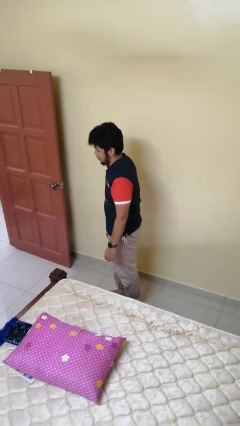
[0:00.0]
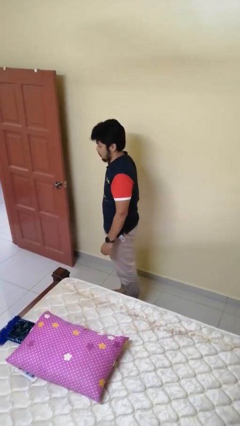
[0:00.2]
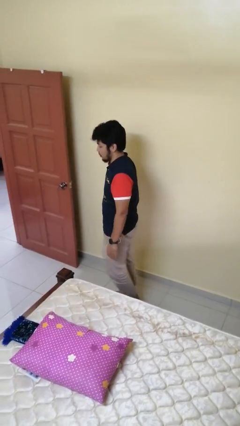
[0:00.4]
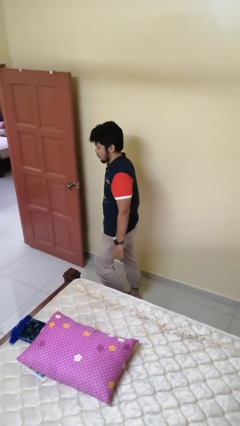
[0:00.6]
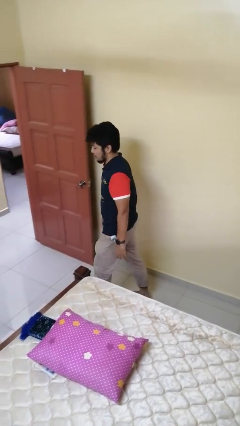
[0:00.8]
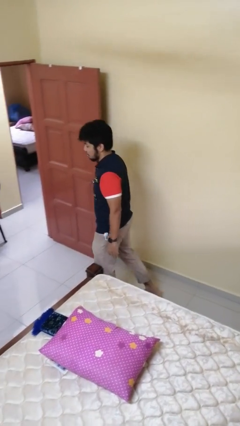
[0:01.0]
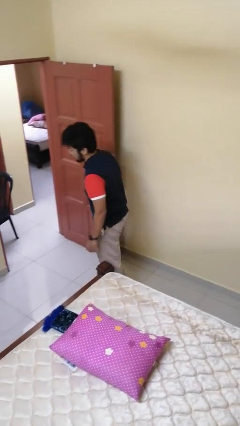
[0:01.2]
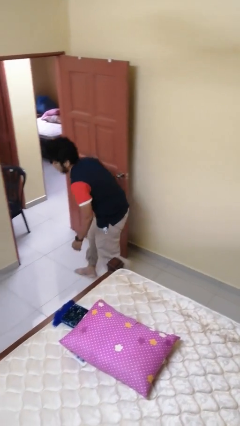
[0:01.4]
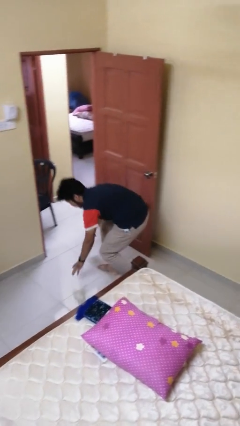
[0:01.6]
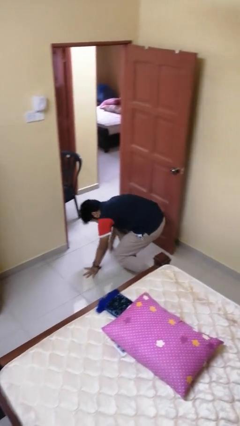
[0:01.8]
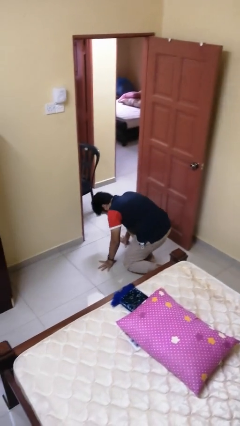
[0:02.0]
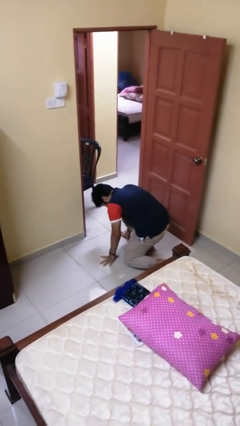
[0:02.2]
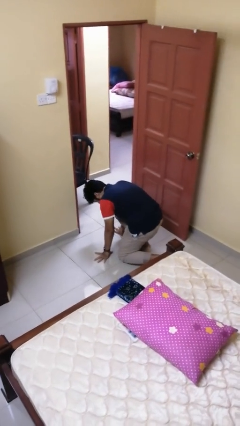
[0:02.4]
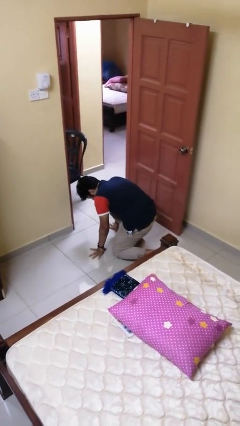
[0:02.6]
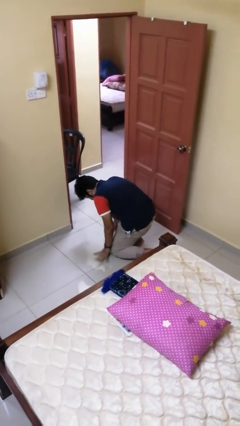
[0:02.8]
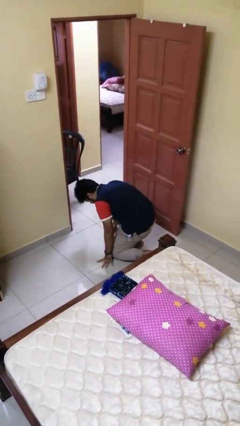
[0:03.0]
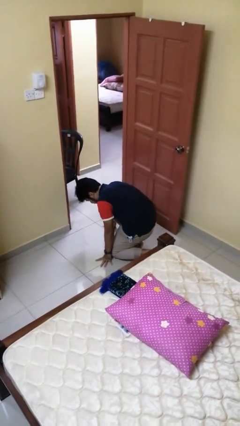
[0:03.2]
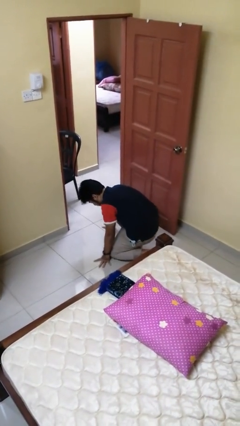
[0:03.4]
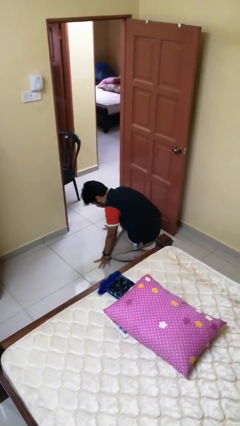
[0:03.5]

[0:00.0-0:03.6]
person trips on object on floor

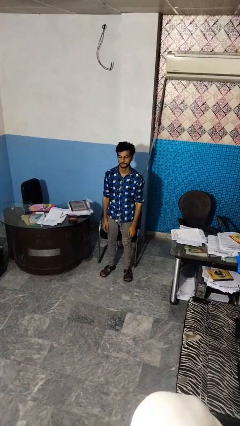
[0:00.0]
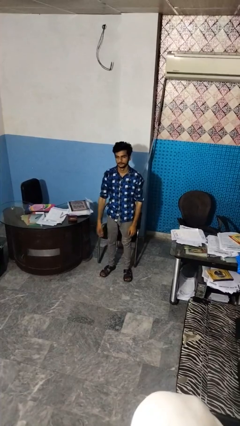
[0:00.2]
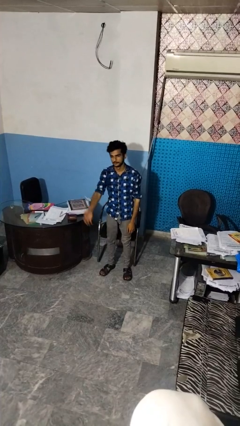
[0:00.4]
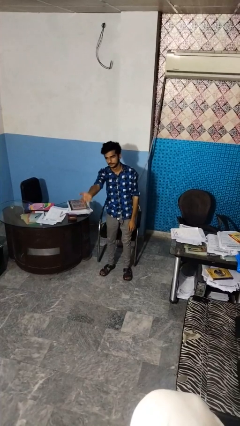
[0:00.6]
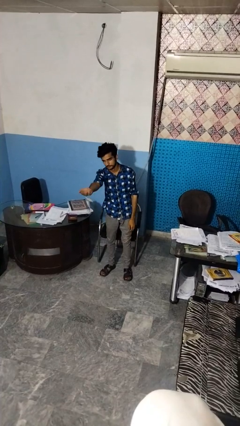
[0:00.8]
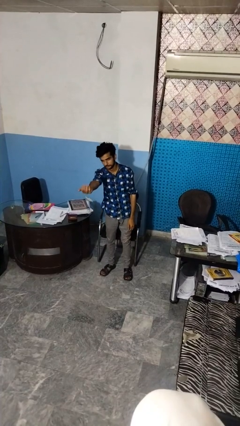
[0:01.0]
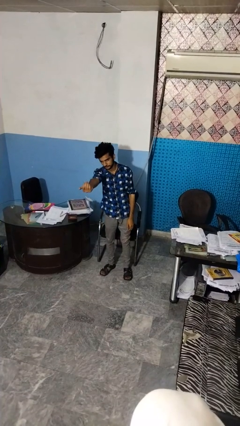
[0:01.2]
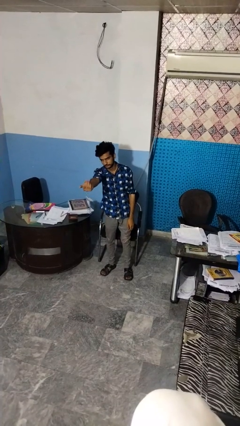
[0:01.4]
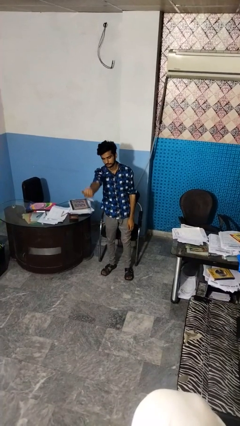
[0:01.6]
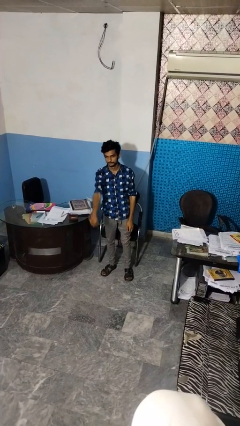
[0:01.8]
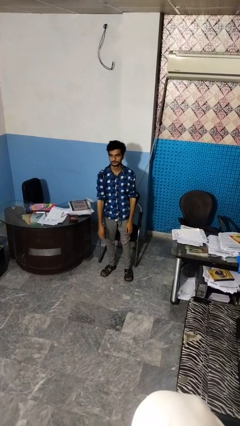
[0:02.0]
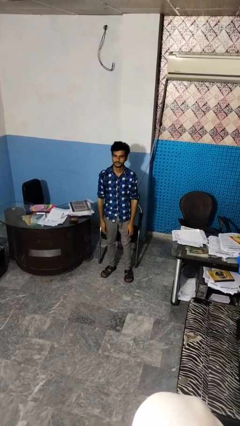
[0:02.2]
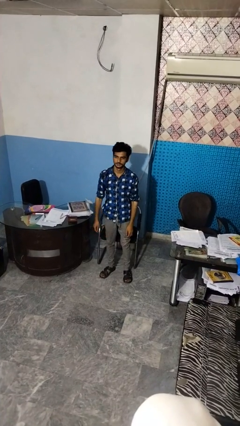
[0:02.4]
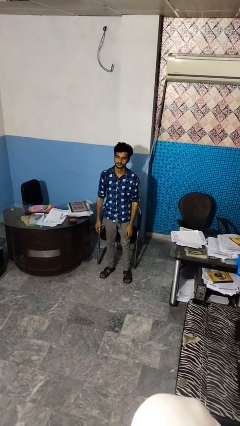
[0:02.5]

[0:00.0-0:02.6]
person gestures come here

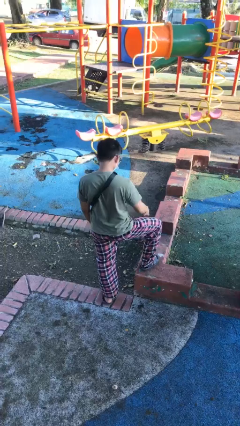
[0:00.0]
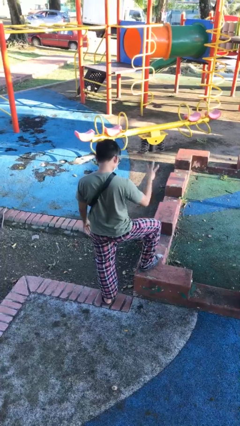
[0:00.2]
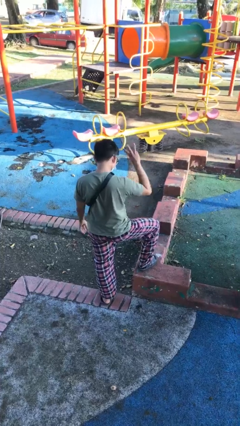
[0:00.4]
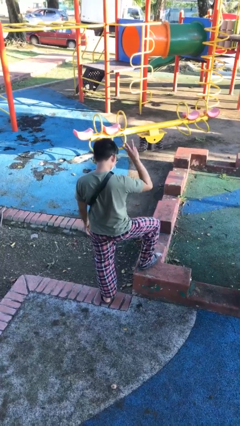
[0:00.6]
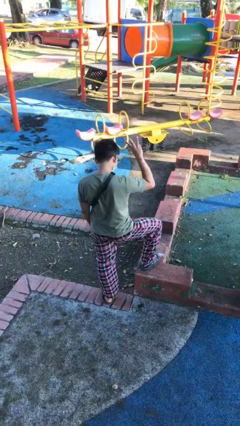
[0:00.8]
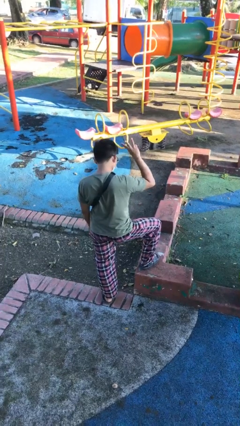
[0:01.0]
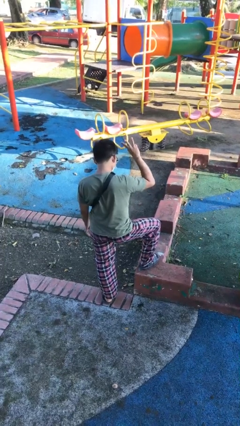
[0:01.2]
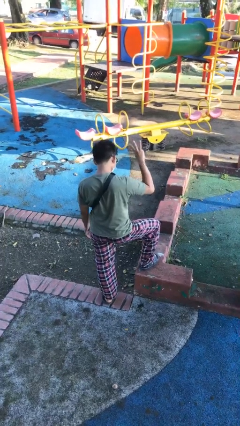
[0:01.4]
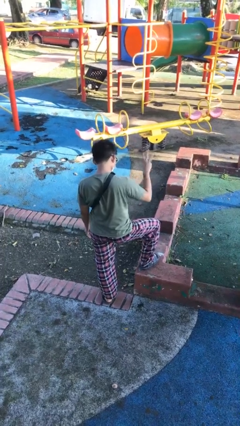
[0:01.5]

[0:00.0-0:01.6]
person gestures number three

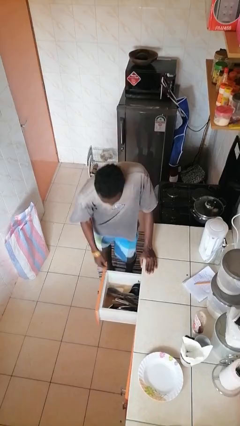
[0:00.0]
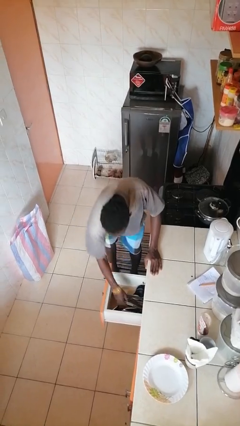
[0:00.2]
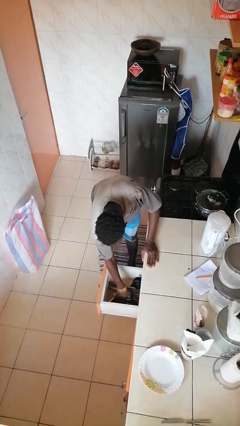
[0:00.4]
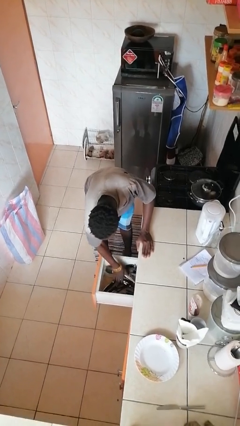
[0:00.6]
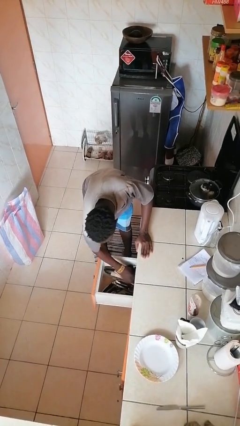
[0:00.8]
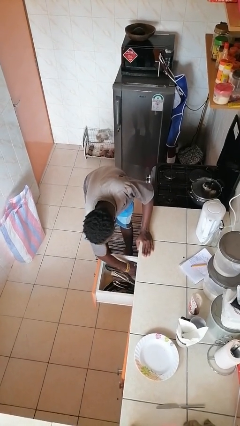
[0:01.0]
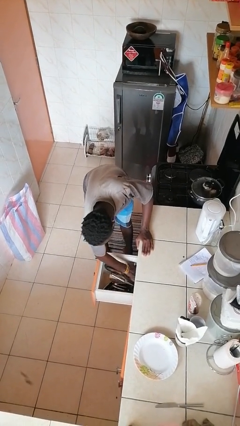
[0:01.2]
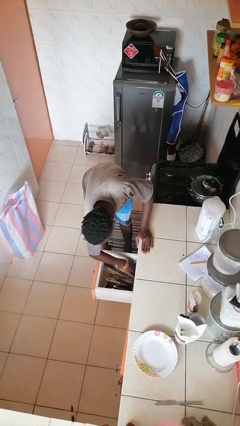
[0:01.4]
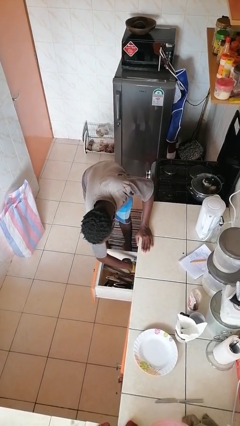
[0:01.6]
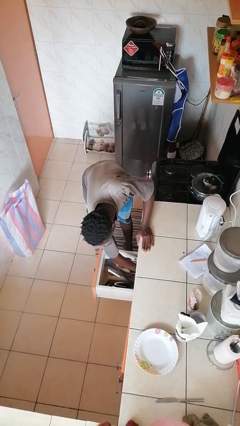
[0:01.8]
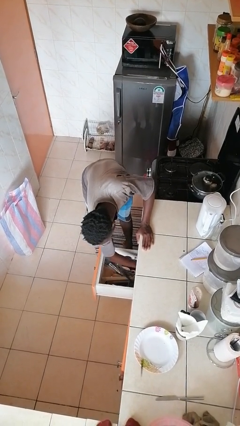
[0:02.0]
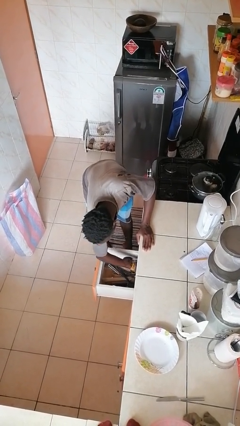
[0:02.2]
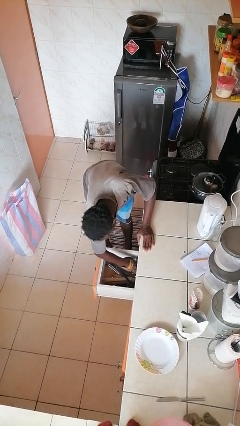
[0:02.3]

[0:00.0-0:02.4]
person searches in kitchen drawer

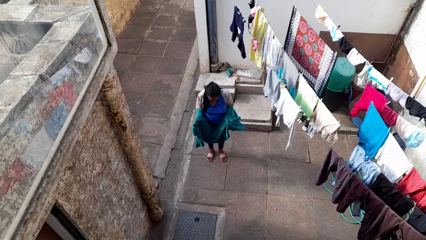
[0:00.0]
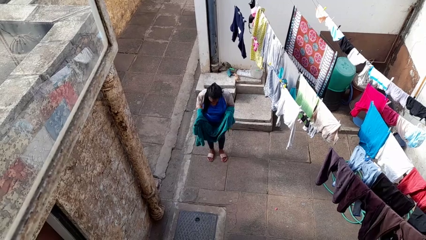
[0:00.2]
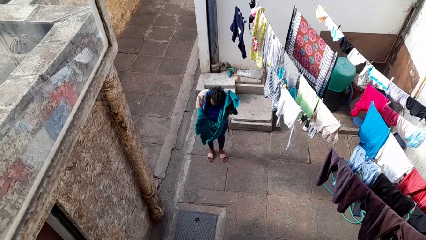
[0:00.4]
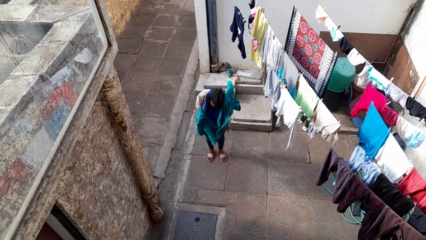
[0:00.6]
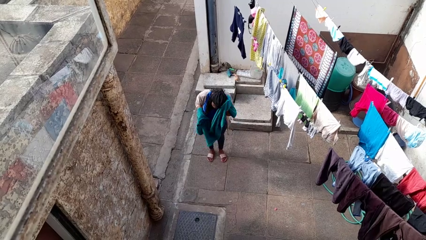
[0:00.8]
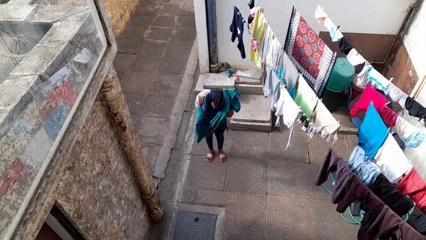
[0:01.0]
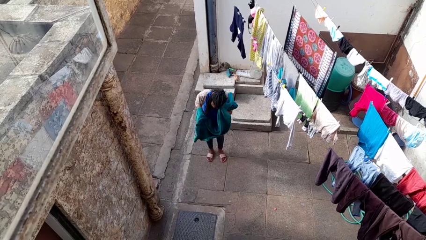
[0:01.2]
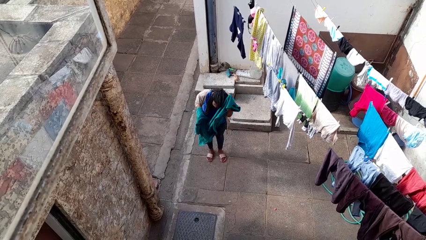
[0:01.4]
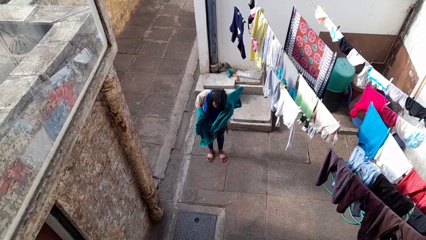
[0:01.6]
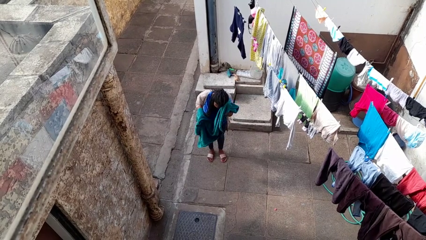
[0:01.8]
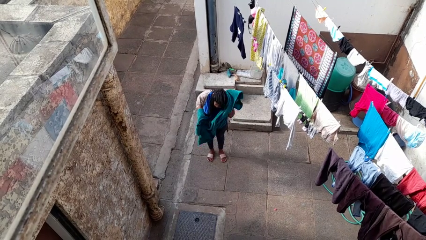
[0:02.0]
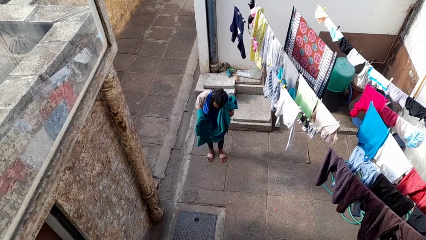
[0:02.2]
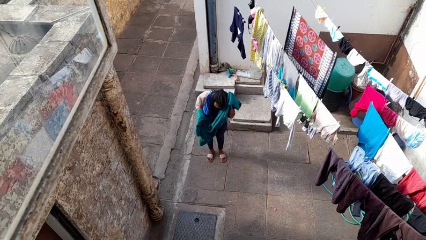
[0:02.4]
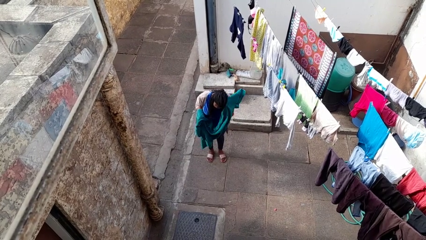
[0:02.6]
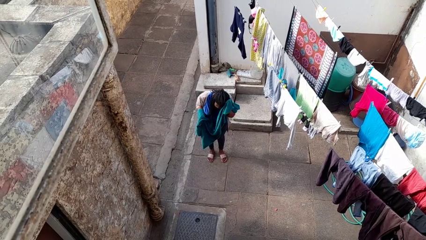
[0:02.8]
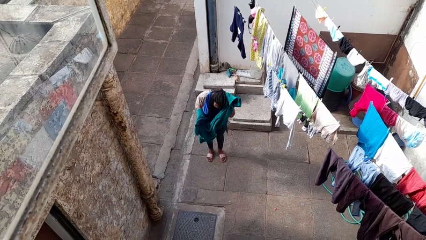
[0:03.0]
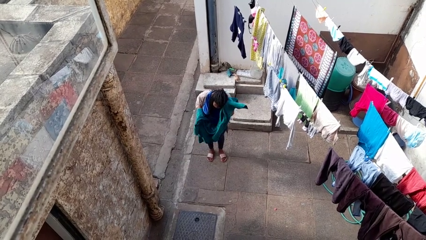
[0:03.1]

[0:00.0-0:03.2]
person dries hair with towel

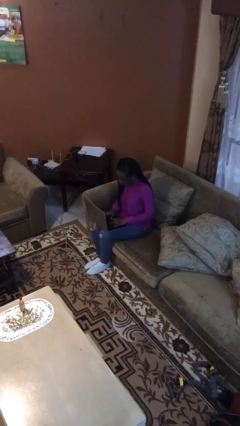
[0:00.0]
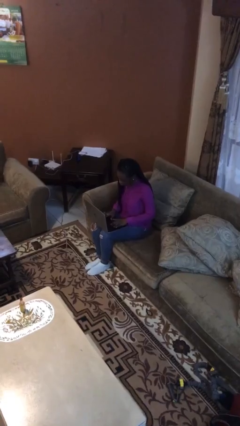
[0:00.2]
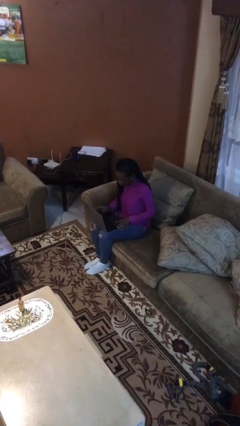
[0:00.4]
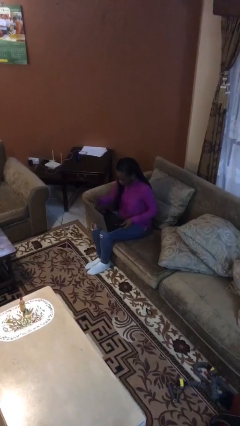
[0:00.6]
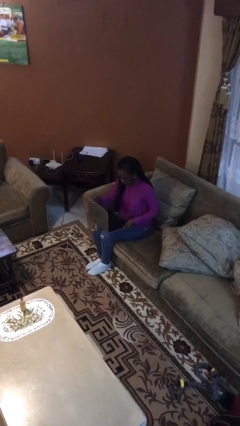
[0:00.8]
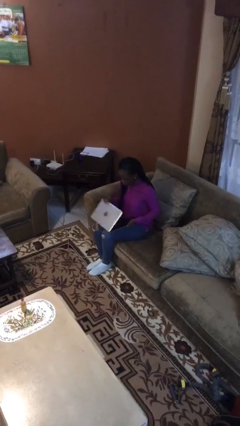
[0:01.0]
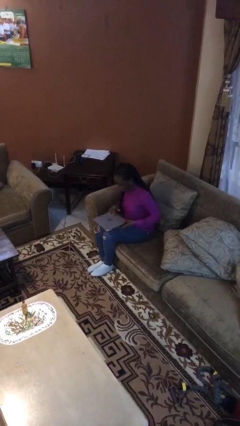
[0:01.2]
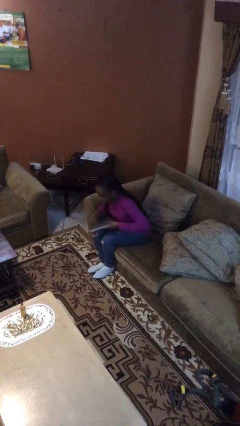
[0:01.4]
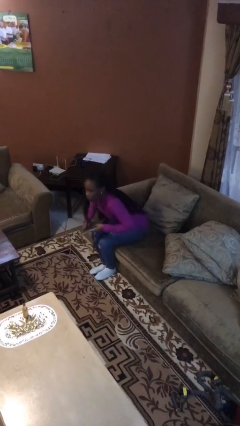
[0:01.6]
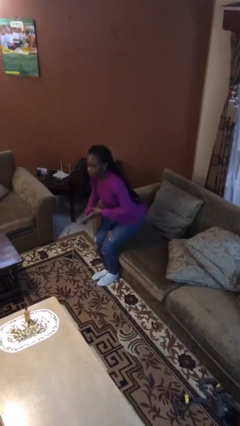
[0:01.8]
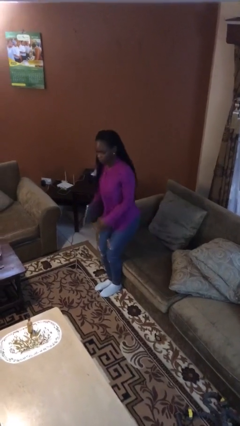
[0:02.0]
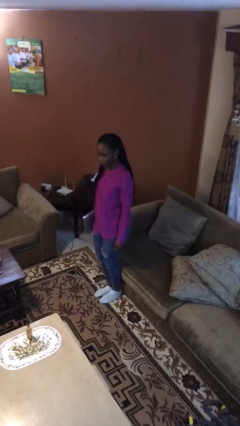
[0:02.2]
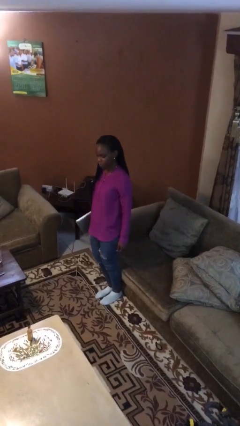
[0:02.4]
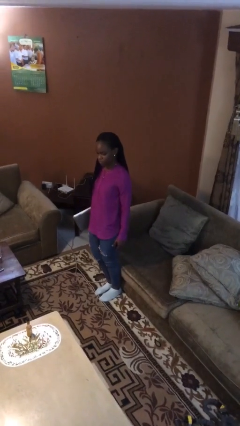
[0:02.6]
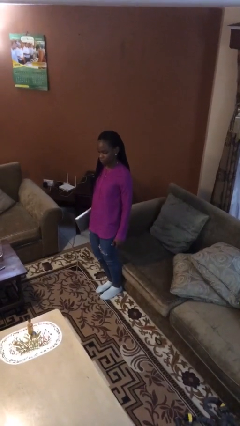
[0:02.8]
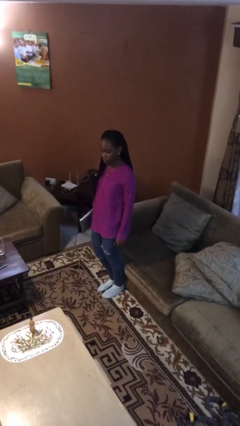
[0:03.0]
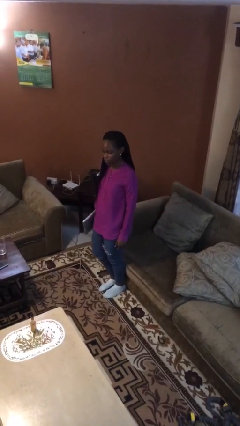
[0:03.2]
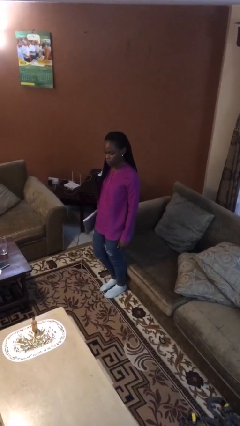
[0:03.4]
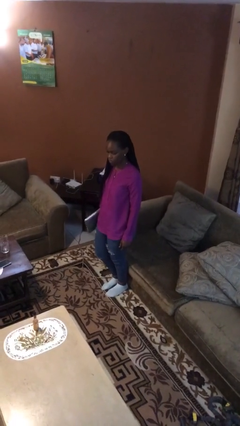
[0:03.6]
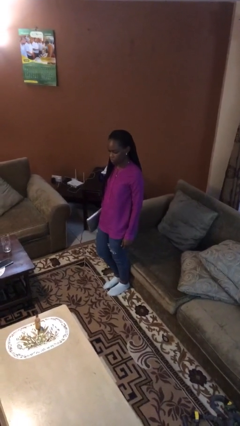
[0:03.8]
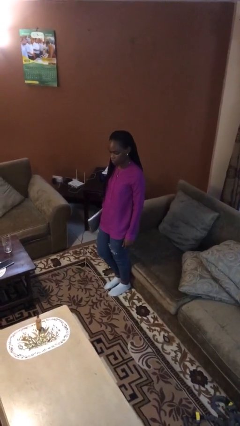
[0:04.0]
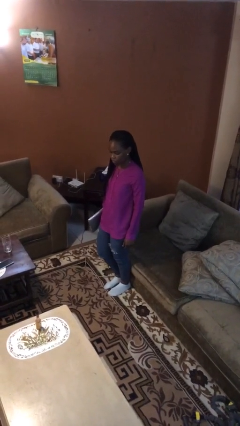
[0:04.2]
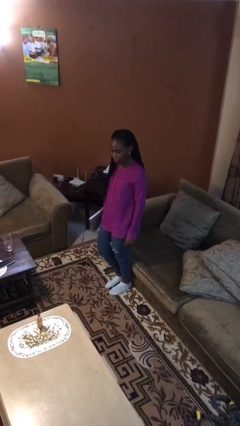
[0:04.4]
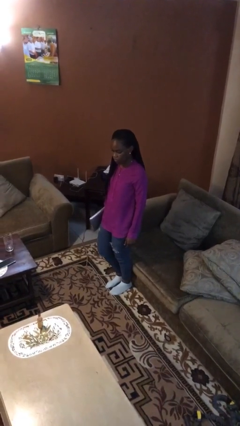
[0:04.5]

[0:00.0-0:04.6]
person stands up
